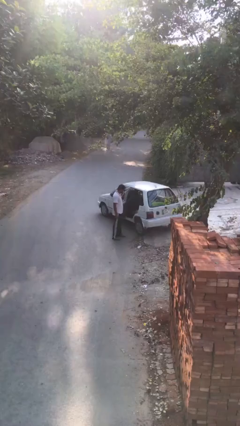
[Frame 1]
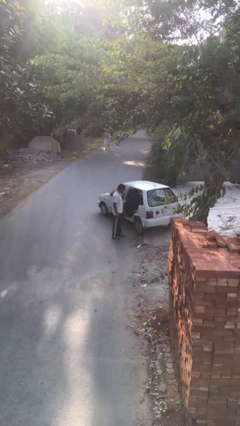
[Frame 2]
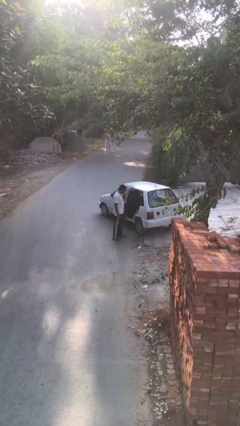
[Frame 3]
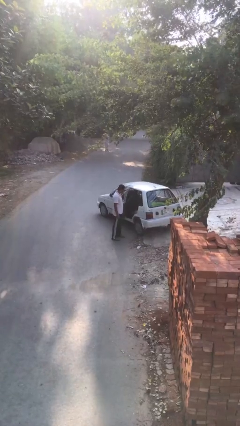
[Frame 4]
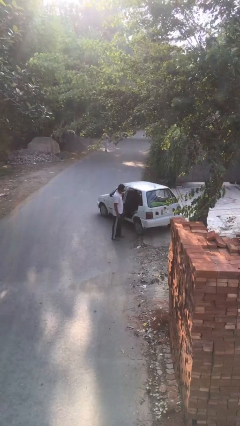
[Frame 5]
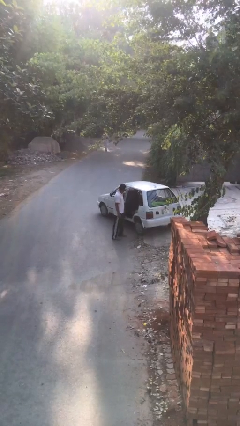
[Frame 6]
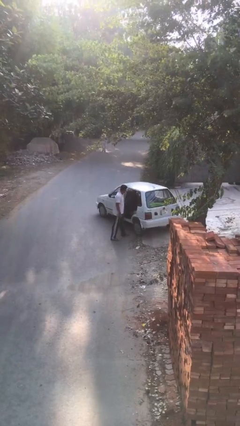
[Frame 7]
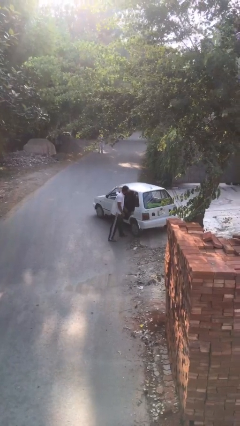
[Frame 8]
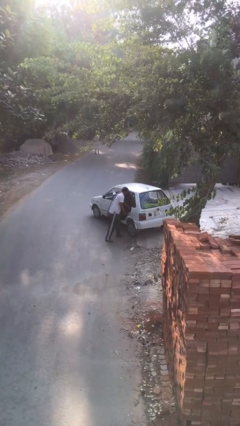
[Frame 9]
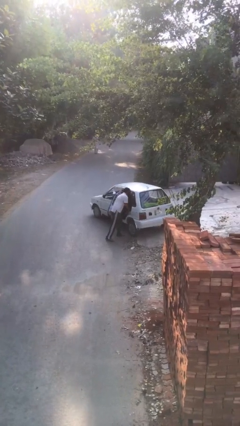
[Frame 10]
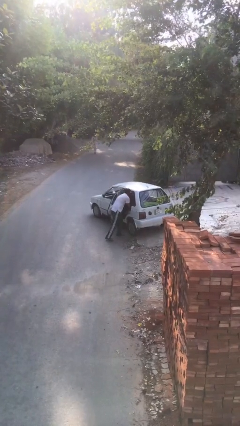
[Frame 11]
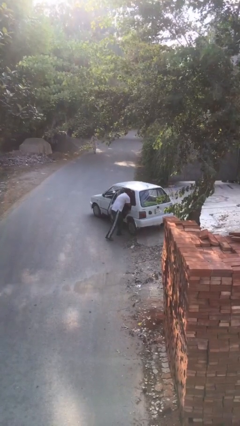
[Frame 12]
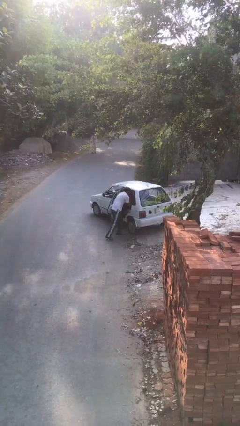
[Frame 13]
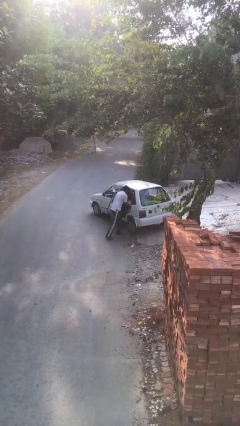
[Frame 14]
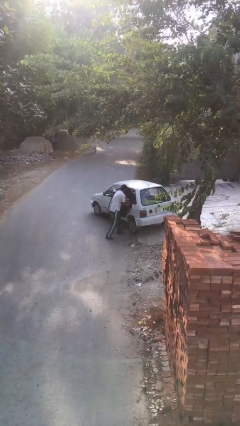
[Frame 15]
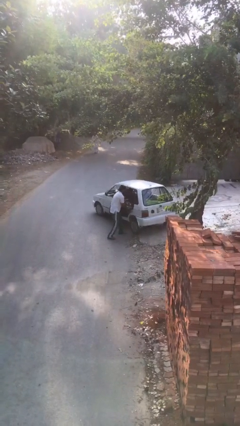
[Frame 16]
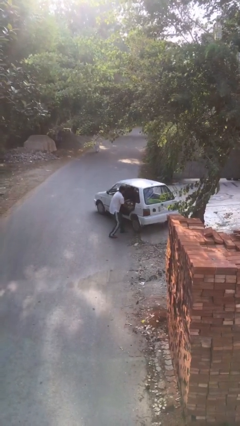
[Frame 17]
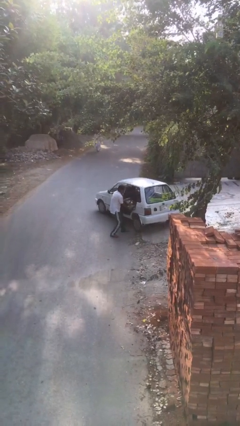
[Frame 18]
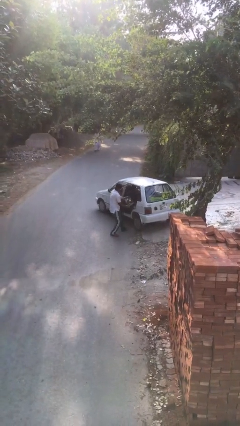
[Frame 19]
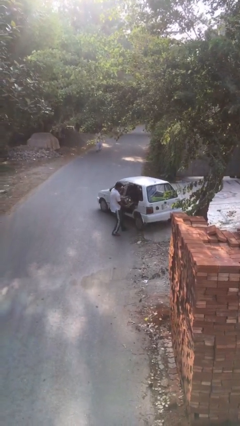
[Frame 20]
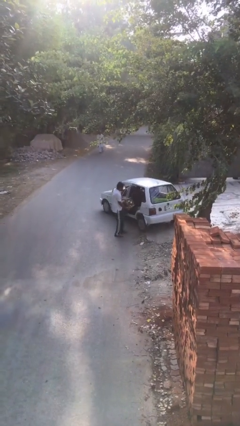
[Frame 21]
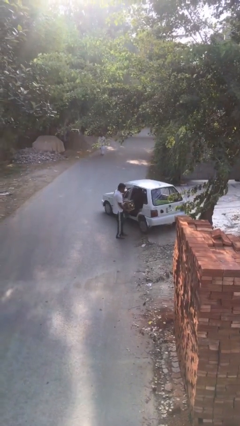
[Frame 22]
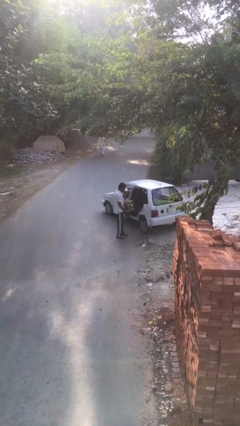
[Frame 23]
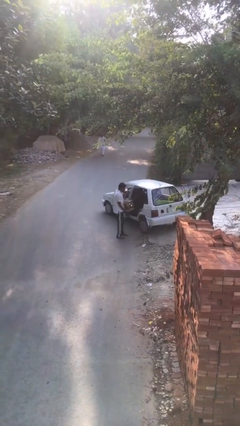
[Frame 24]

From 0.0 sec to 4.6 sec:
person unloads car

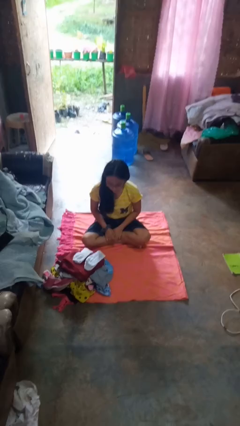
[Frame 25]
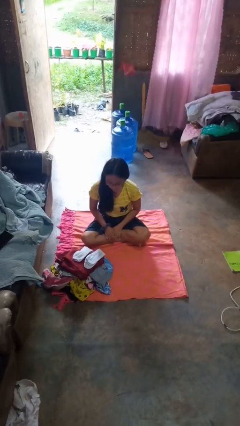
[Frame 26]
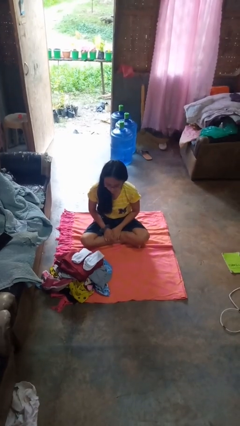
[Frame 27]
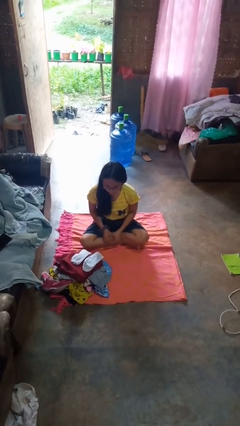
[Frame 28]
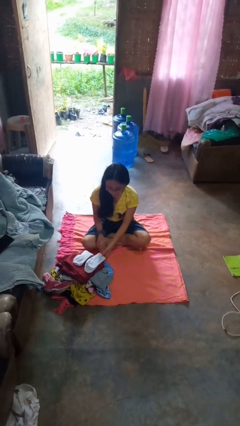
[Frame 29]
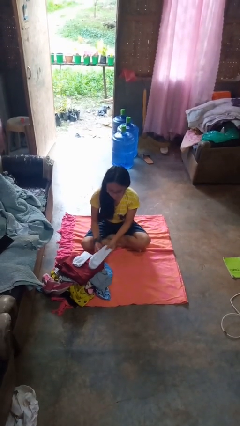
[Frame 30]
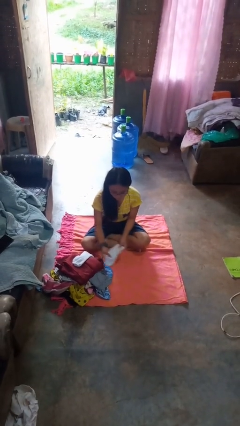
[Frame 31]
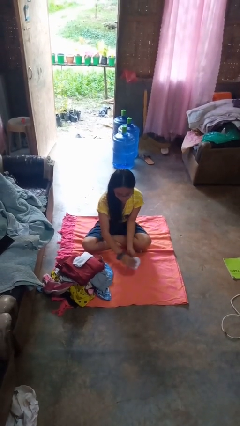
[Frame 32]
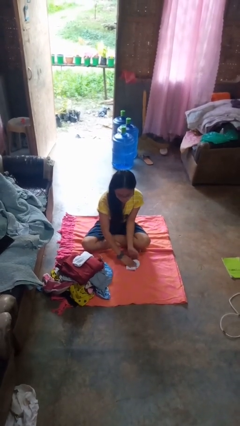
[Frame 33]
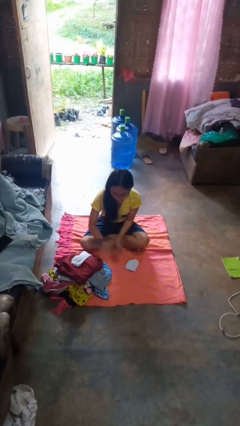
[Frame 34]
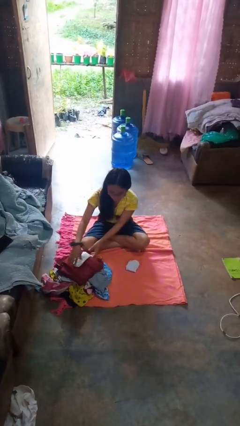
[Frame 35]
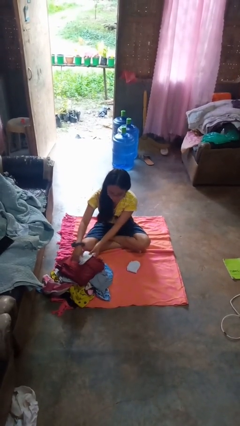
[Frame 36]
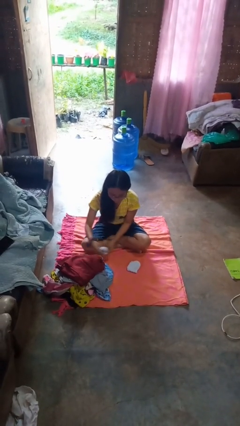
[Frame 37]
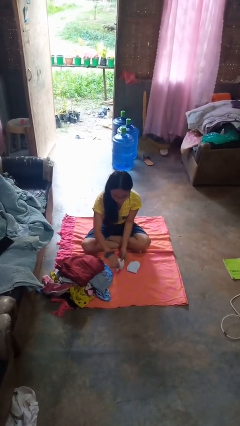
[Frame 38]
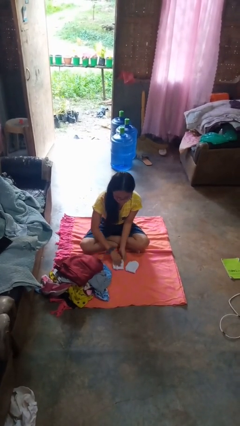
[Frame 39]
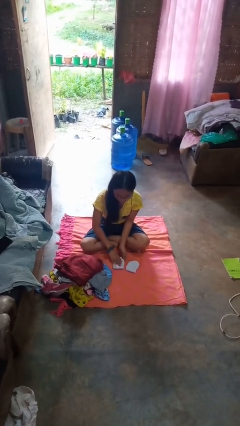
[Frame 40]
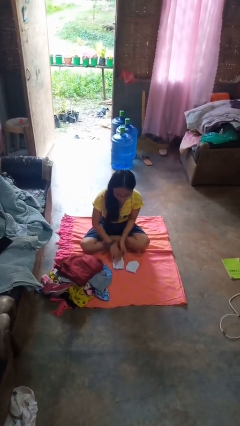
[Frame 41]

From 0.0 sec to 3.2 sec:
person folds socks

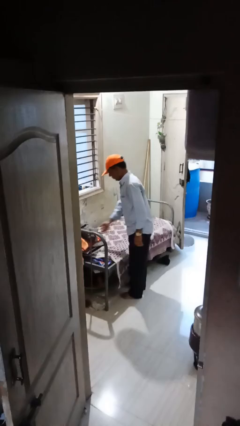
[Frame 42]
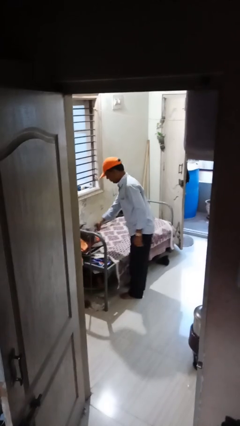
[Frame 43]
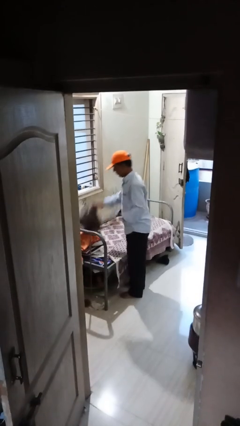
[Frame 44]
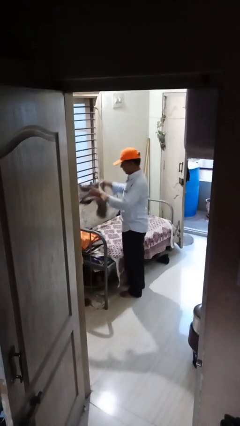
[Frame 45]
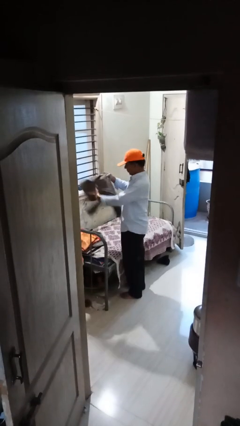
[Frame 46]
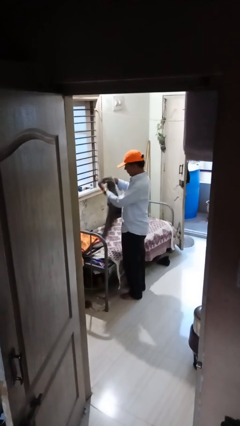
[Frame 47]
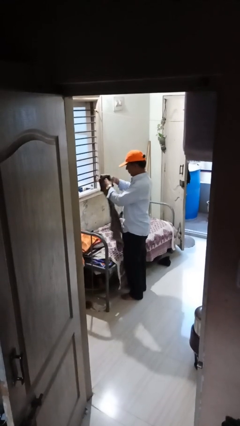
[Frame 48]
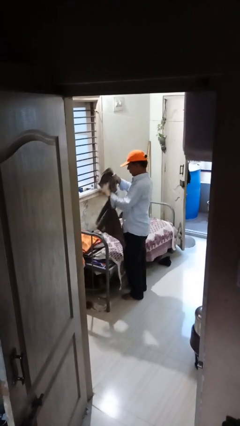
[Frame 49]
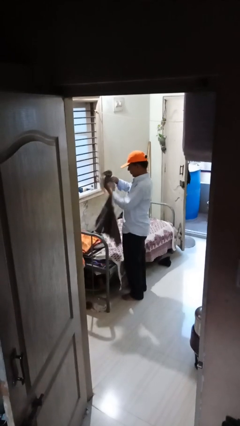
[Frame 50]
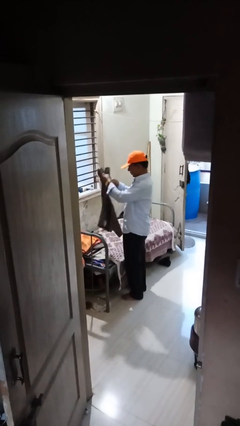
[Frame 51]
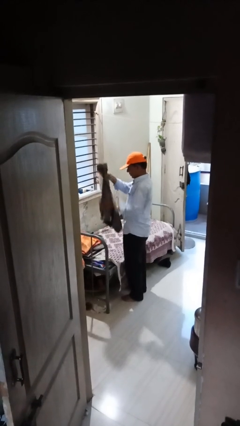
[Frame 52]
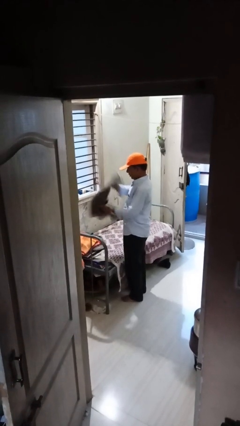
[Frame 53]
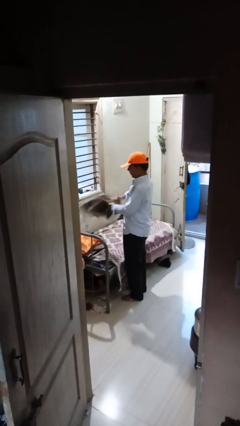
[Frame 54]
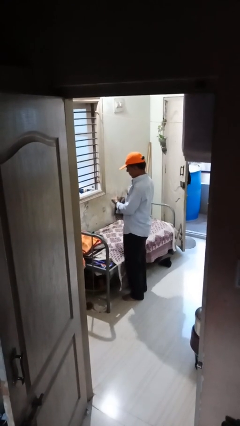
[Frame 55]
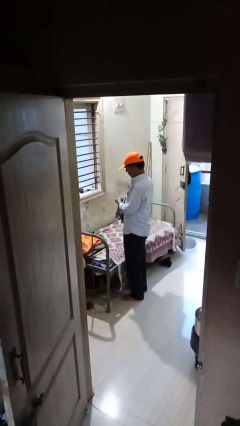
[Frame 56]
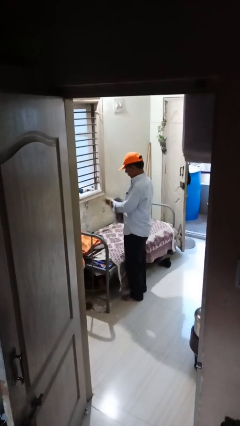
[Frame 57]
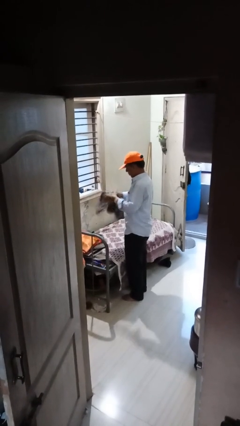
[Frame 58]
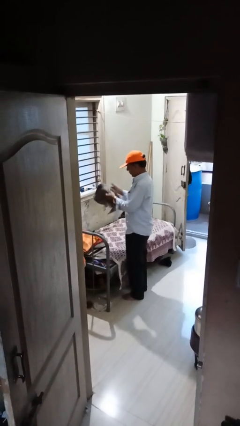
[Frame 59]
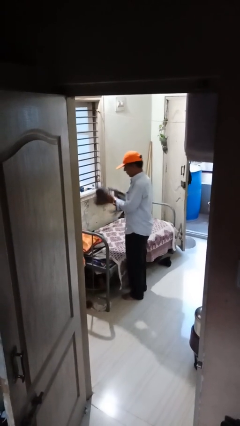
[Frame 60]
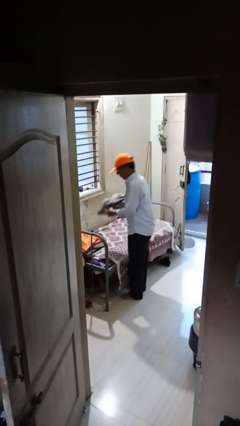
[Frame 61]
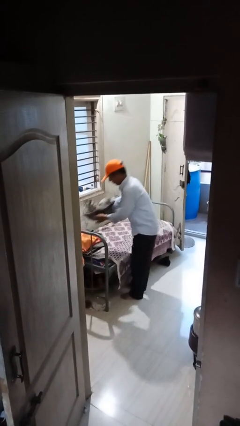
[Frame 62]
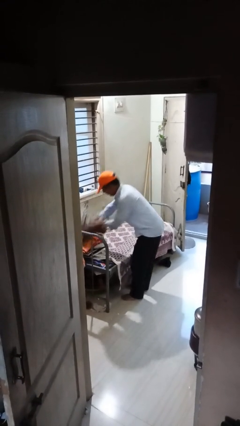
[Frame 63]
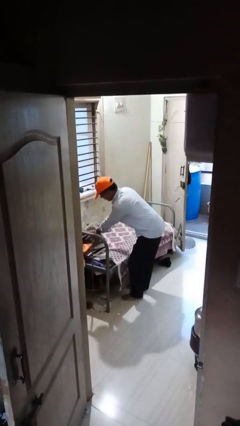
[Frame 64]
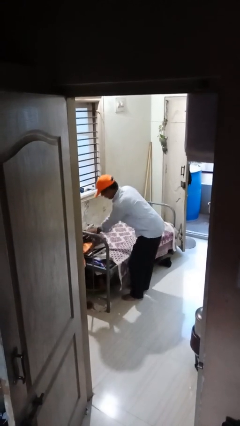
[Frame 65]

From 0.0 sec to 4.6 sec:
person folds pants

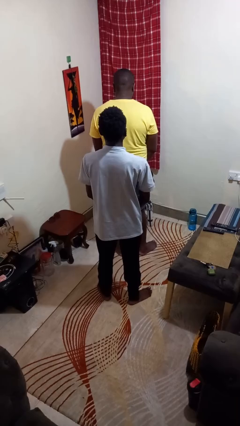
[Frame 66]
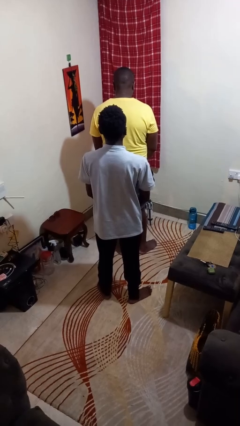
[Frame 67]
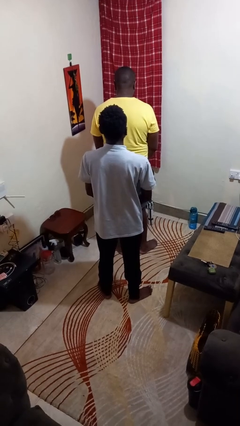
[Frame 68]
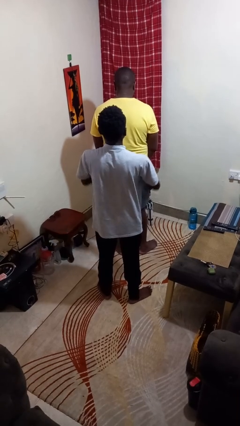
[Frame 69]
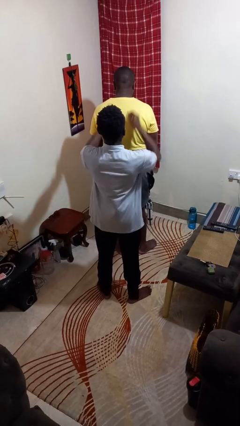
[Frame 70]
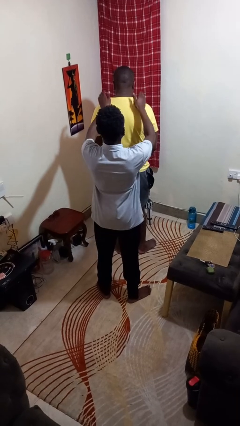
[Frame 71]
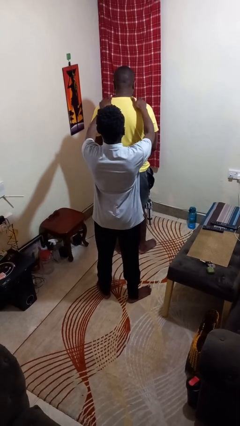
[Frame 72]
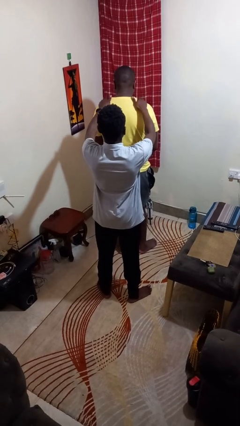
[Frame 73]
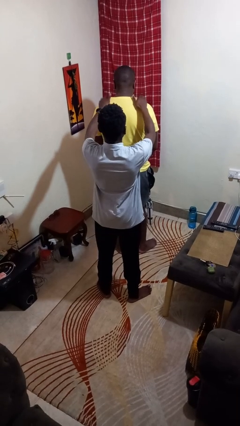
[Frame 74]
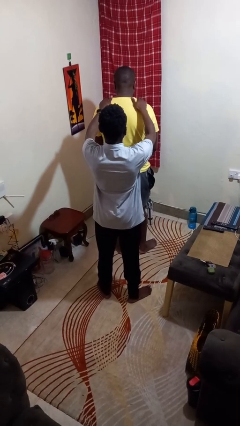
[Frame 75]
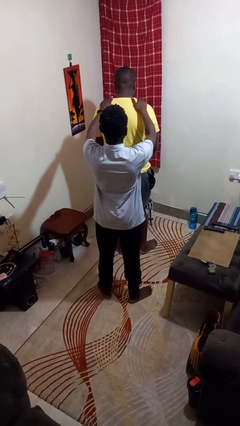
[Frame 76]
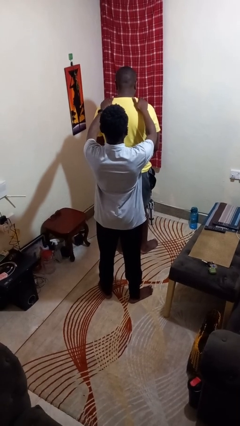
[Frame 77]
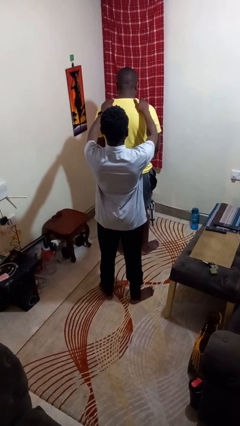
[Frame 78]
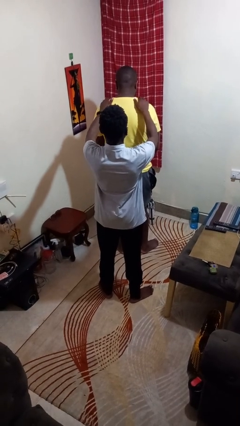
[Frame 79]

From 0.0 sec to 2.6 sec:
person pounds shoulders of person

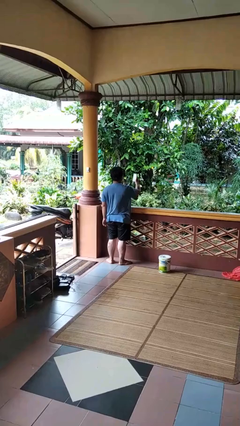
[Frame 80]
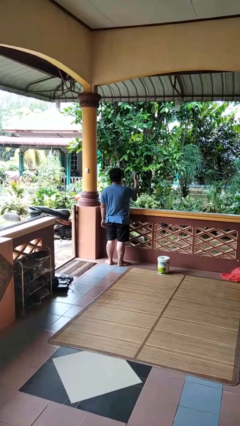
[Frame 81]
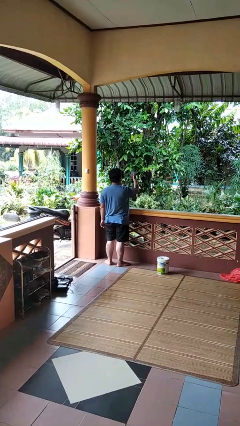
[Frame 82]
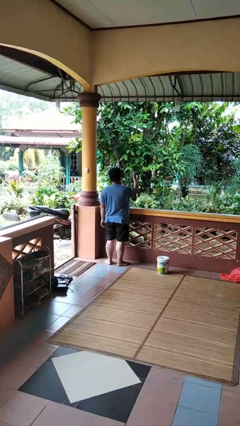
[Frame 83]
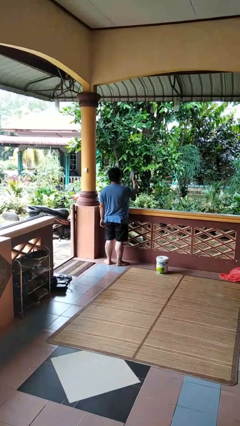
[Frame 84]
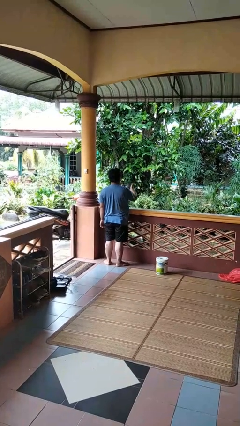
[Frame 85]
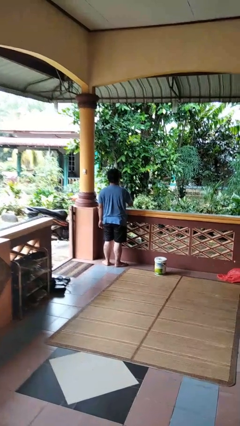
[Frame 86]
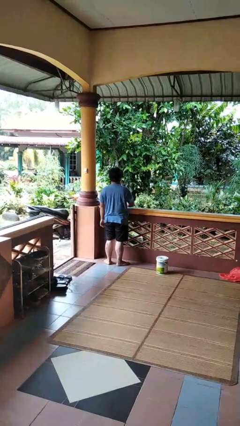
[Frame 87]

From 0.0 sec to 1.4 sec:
person takes selfie

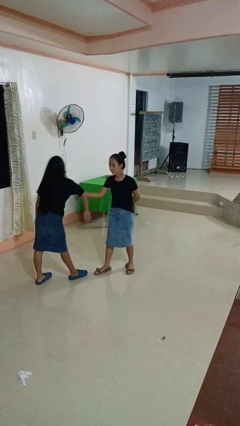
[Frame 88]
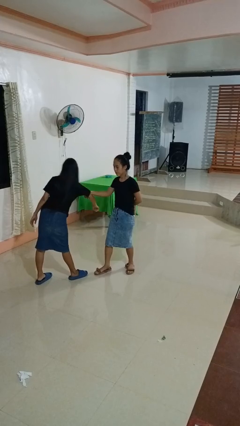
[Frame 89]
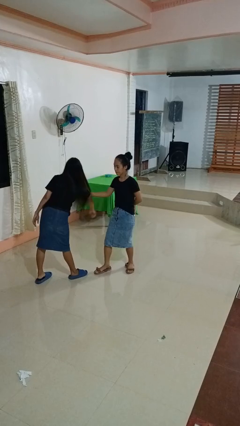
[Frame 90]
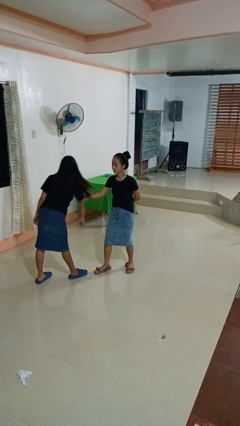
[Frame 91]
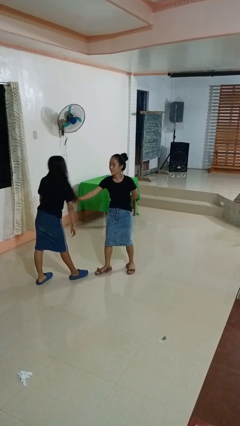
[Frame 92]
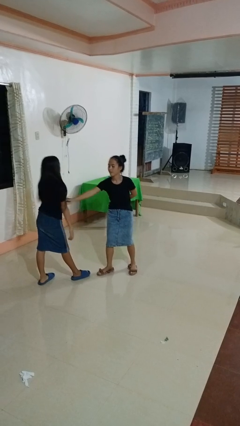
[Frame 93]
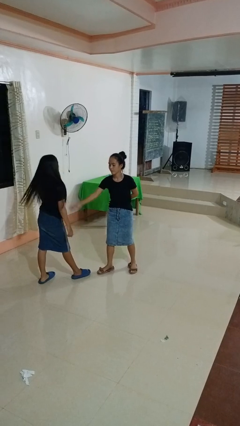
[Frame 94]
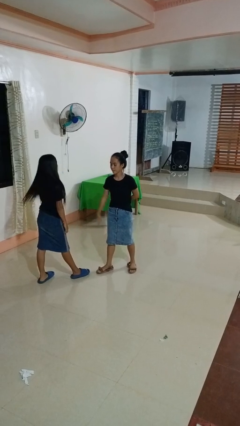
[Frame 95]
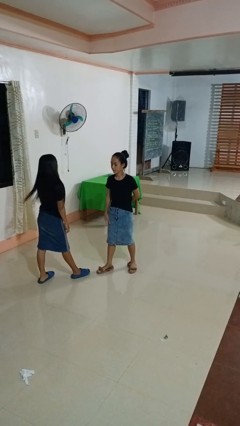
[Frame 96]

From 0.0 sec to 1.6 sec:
person grabs person by bicep
